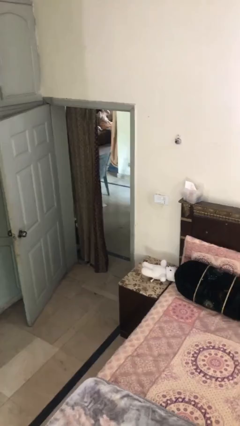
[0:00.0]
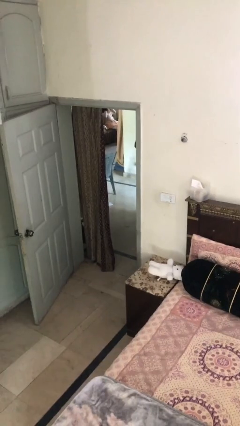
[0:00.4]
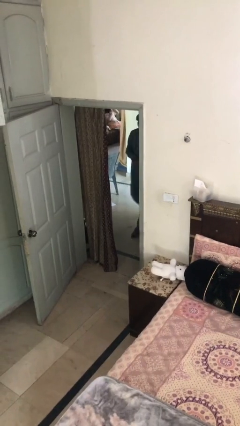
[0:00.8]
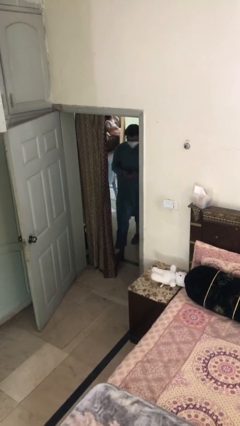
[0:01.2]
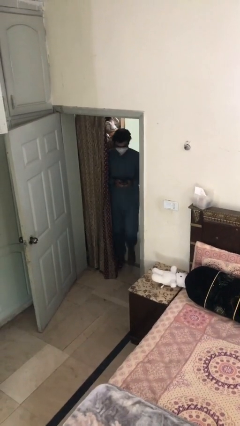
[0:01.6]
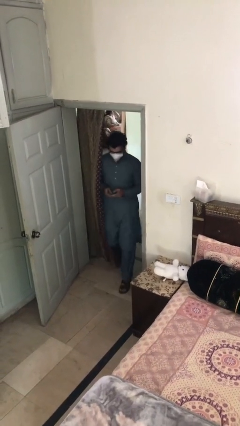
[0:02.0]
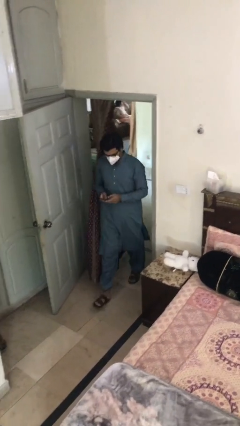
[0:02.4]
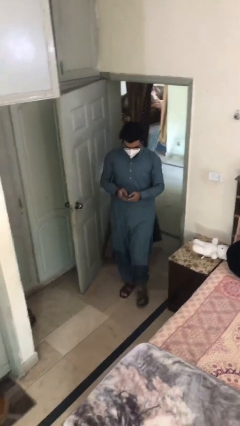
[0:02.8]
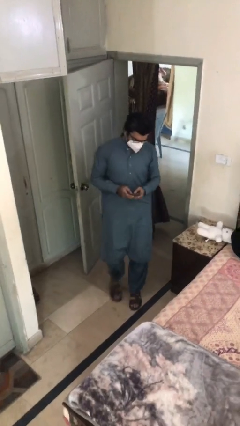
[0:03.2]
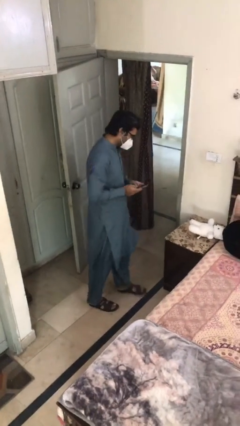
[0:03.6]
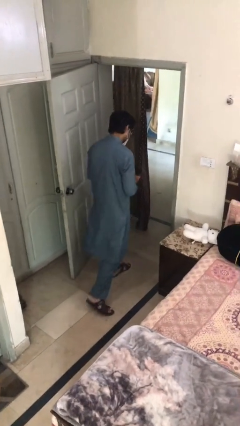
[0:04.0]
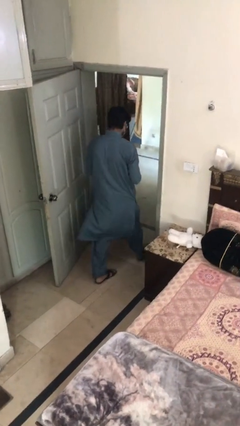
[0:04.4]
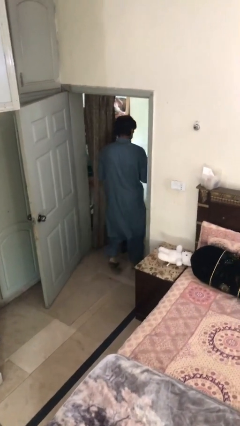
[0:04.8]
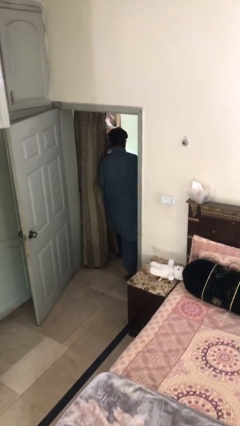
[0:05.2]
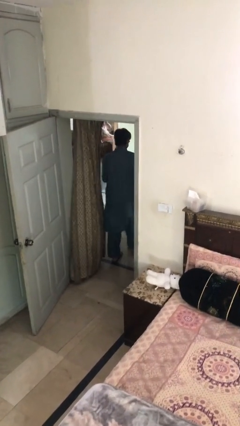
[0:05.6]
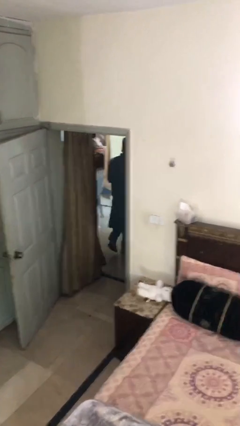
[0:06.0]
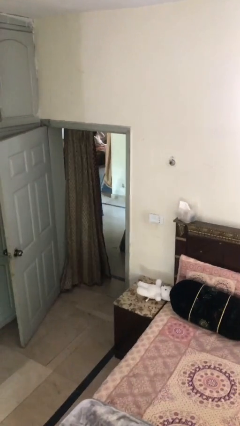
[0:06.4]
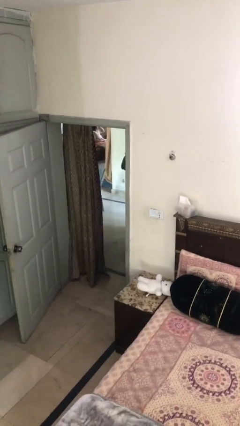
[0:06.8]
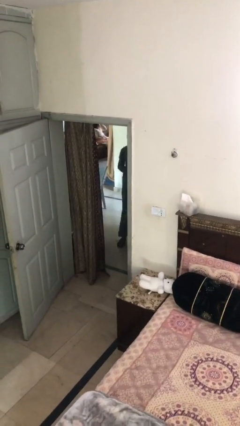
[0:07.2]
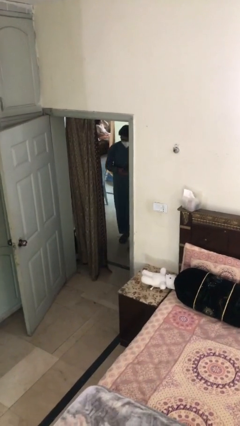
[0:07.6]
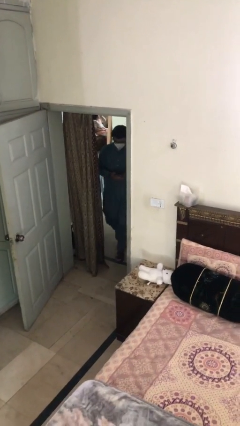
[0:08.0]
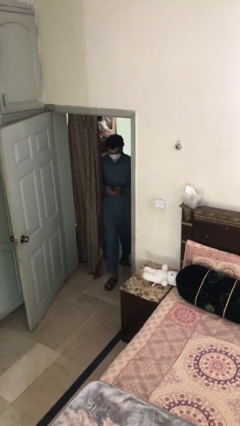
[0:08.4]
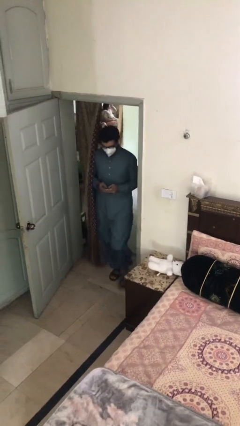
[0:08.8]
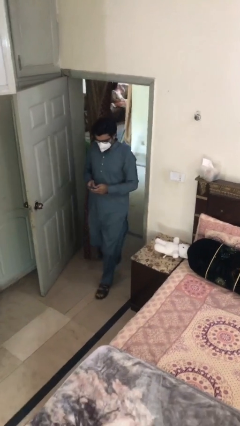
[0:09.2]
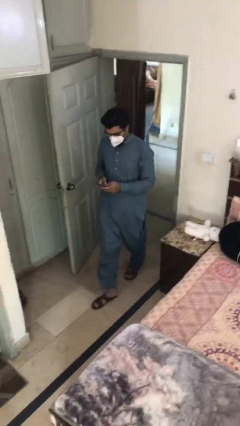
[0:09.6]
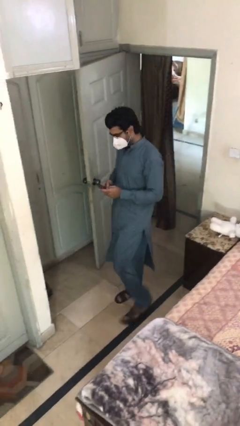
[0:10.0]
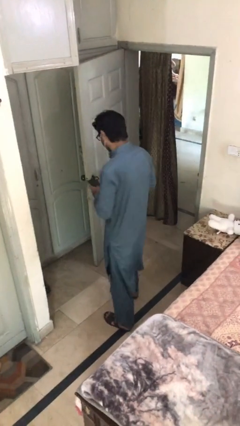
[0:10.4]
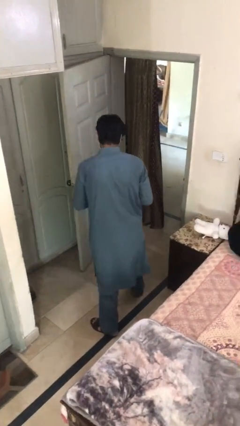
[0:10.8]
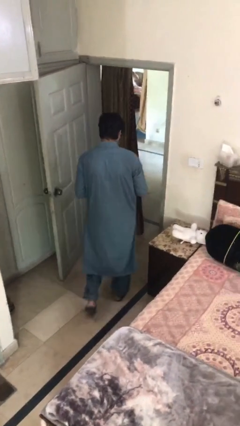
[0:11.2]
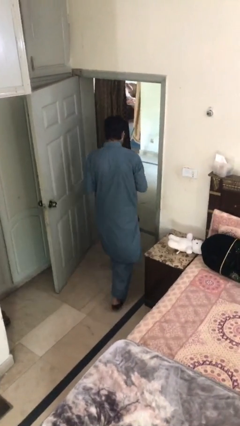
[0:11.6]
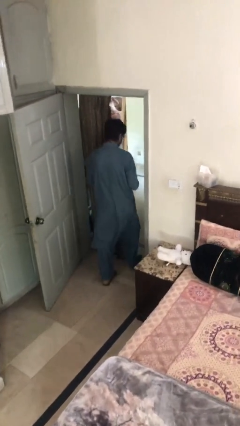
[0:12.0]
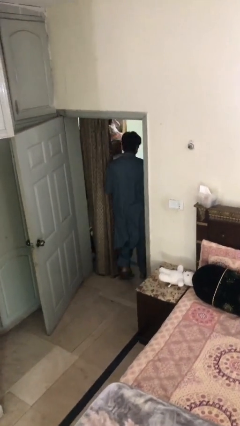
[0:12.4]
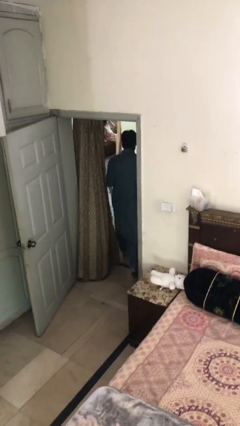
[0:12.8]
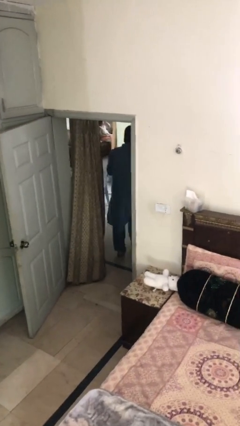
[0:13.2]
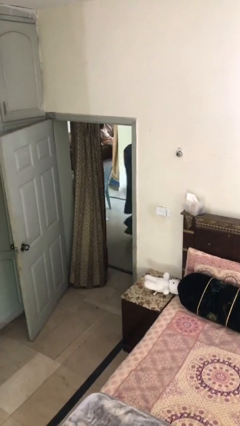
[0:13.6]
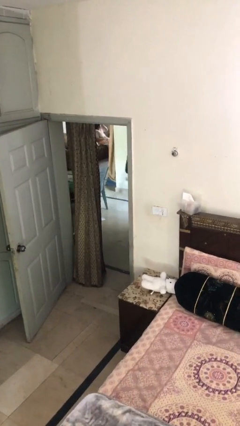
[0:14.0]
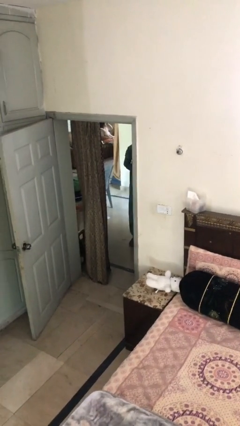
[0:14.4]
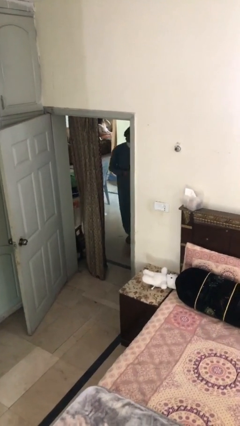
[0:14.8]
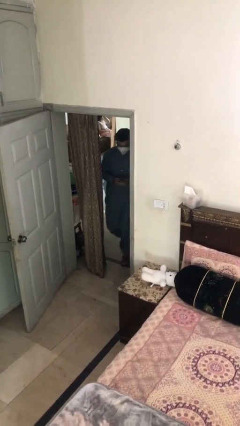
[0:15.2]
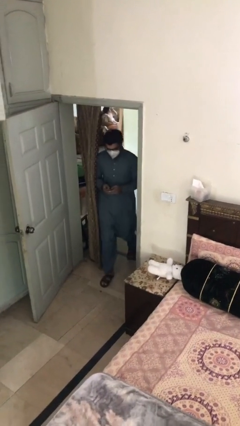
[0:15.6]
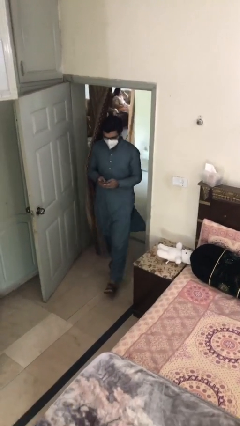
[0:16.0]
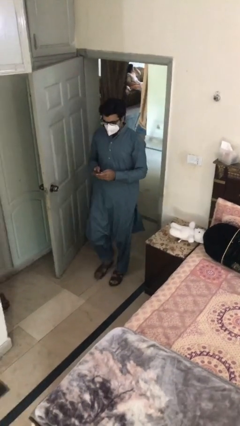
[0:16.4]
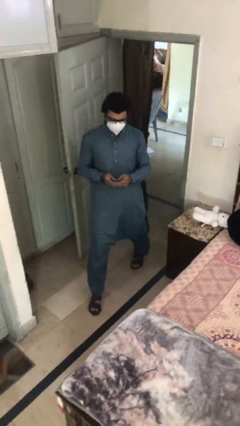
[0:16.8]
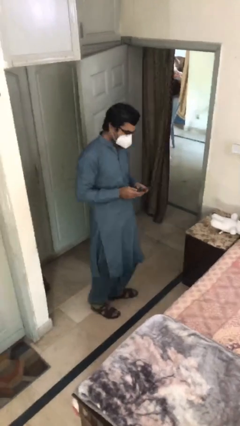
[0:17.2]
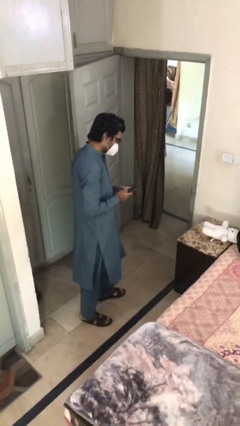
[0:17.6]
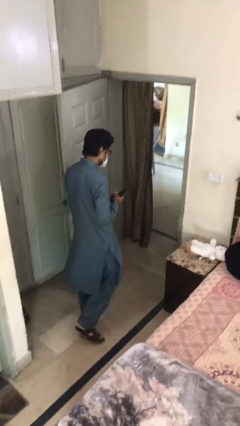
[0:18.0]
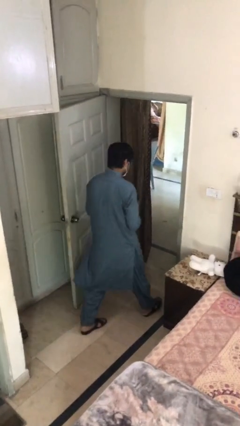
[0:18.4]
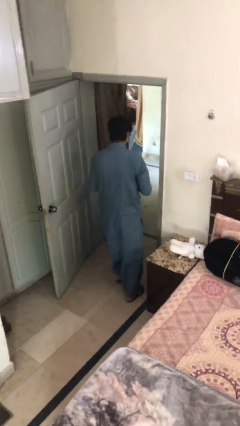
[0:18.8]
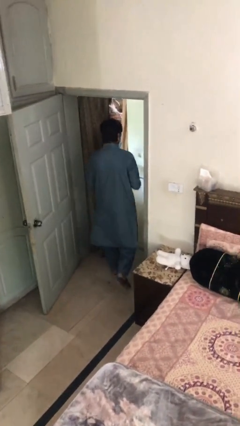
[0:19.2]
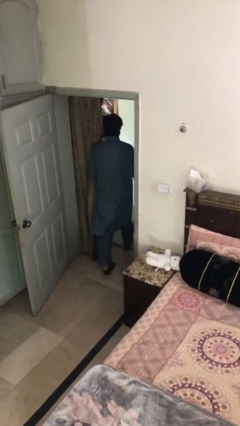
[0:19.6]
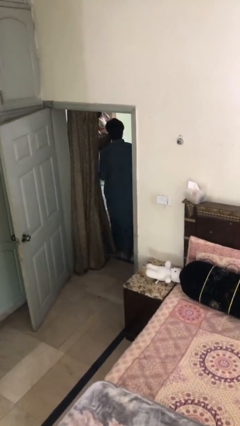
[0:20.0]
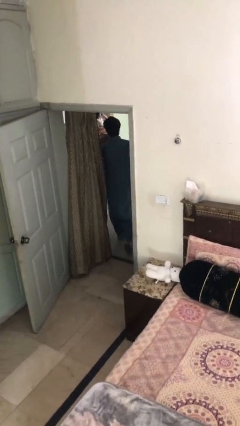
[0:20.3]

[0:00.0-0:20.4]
person texts on phone

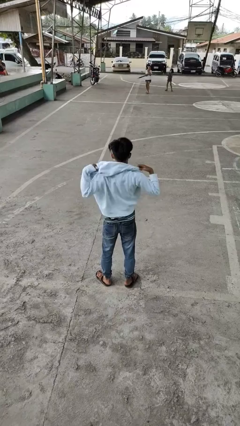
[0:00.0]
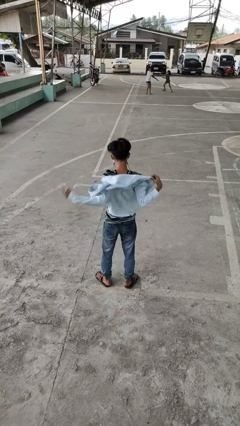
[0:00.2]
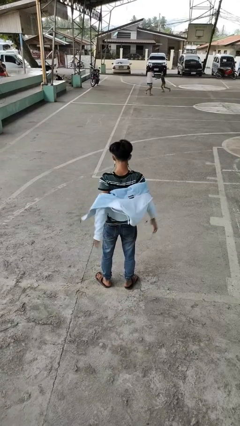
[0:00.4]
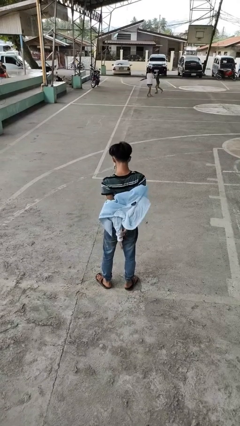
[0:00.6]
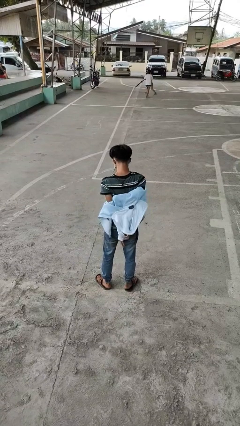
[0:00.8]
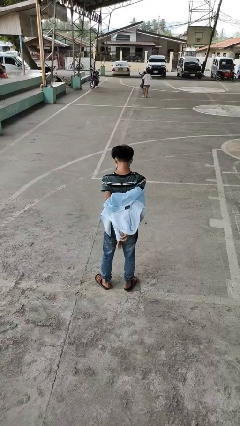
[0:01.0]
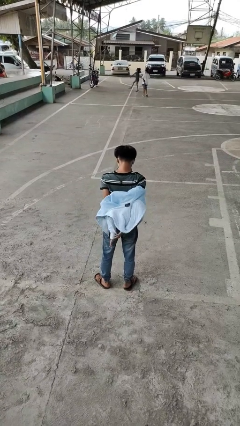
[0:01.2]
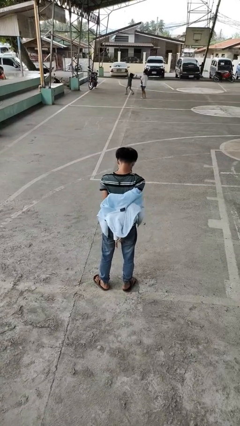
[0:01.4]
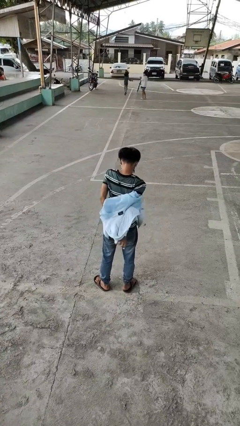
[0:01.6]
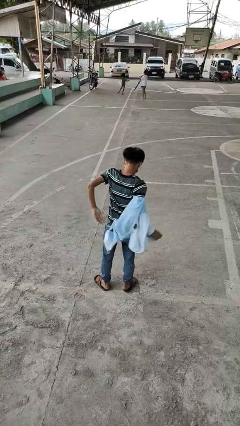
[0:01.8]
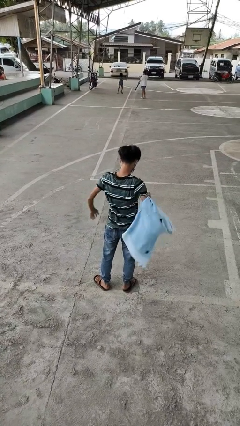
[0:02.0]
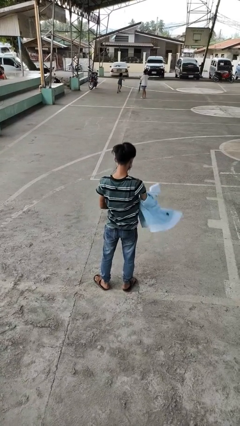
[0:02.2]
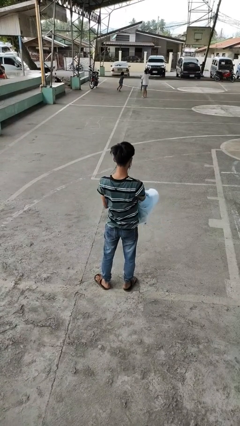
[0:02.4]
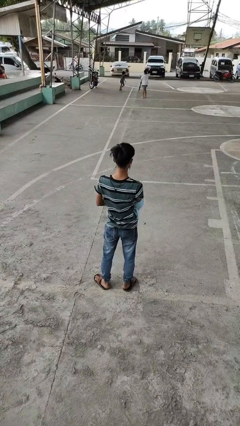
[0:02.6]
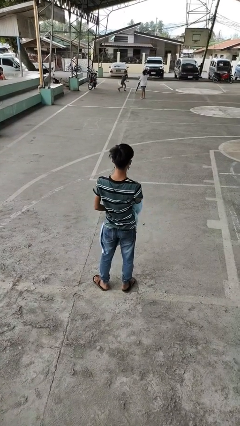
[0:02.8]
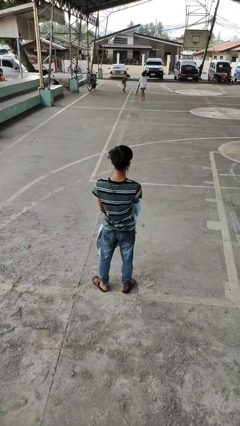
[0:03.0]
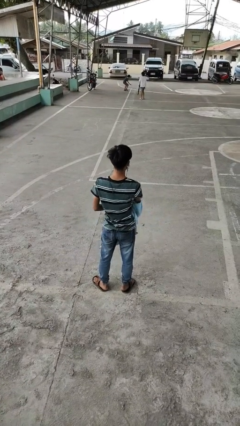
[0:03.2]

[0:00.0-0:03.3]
person takes off jacket

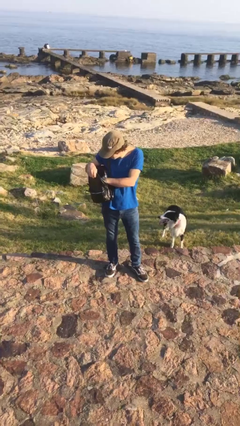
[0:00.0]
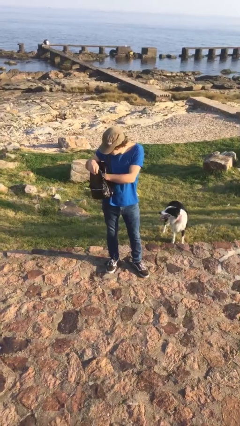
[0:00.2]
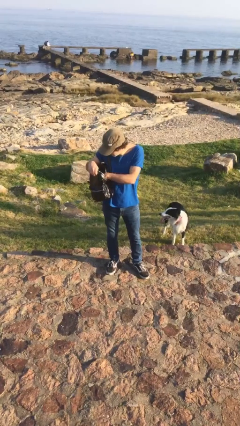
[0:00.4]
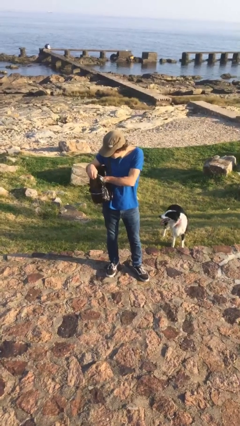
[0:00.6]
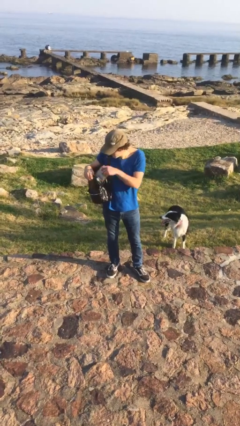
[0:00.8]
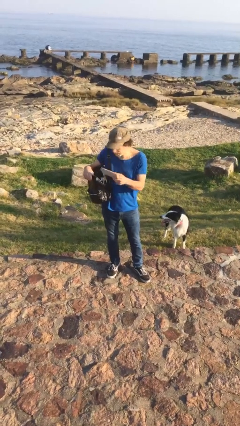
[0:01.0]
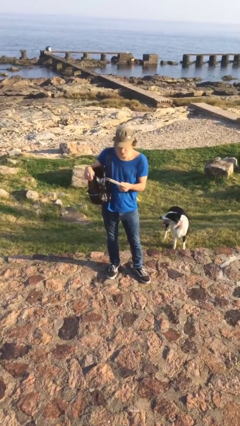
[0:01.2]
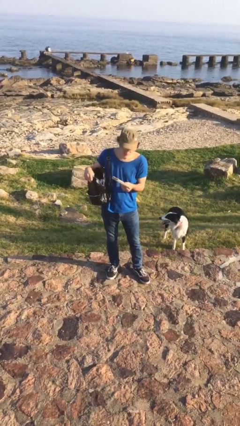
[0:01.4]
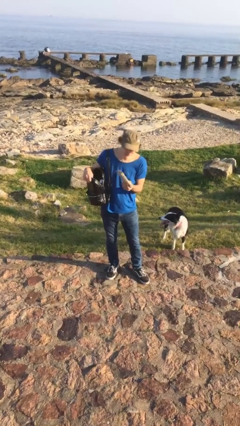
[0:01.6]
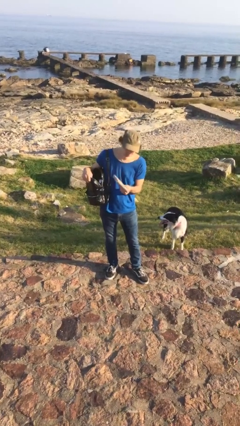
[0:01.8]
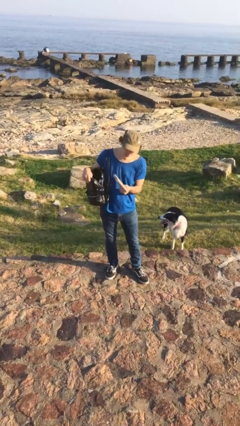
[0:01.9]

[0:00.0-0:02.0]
person takes object from purse

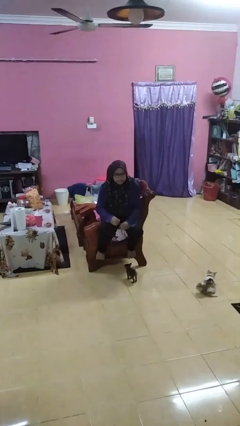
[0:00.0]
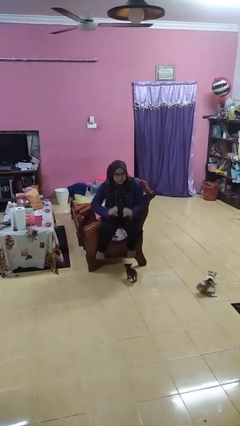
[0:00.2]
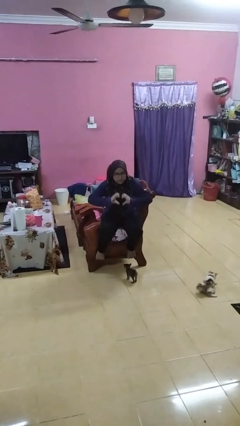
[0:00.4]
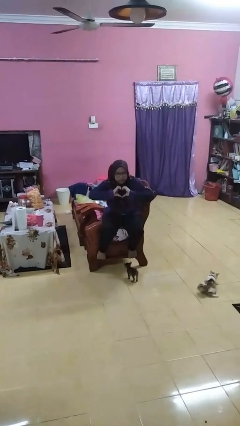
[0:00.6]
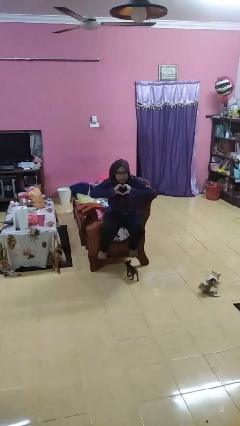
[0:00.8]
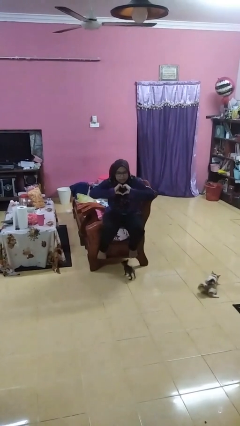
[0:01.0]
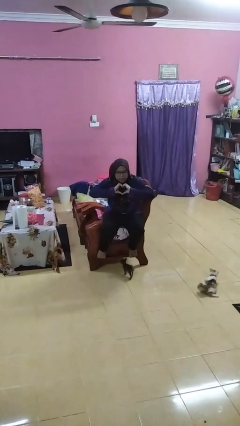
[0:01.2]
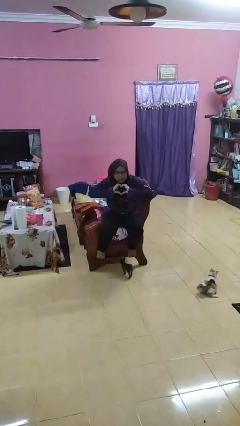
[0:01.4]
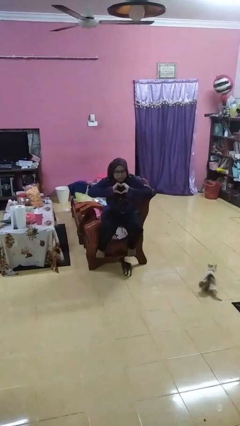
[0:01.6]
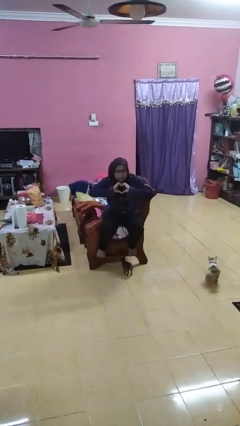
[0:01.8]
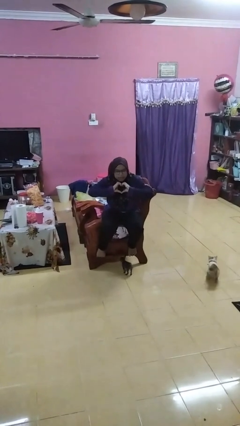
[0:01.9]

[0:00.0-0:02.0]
person gestures heart

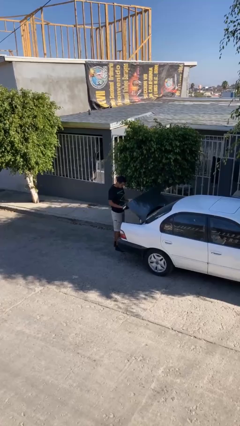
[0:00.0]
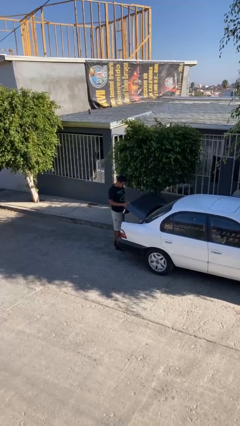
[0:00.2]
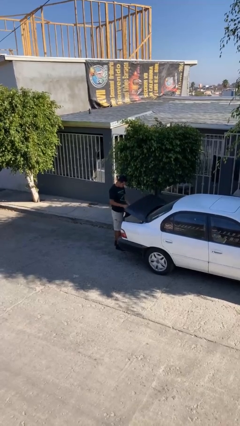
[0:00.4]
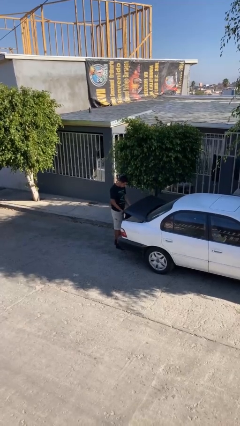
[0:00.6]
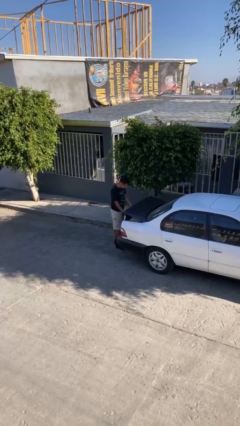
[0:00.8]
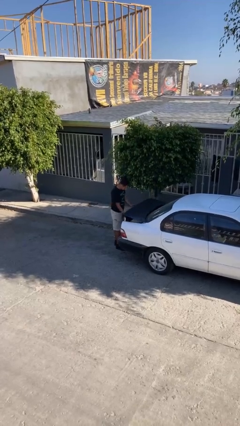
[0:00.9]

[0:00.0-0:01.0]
person closes car trunk
